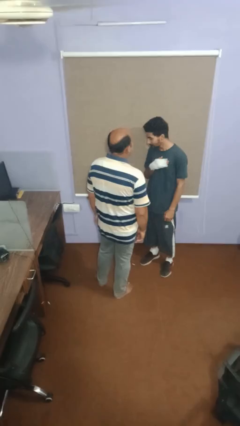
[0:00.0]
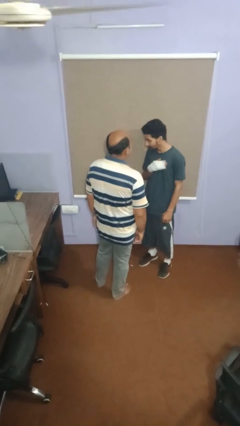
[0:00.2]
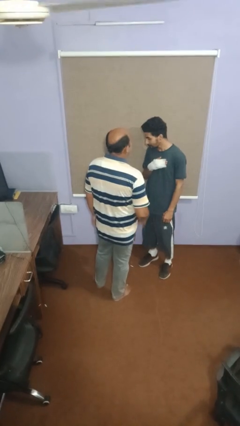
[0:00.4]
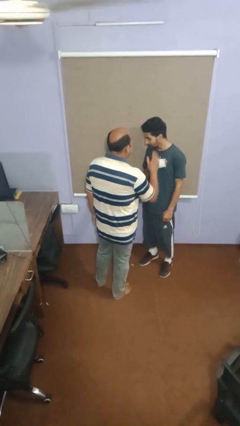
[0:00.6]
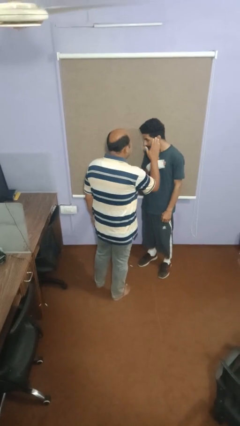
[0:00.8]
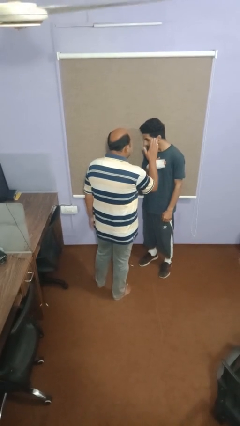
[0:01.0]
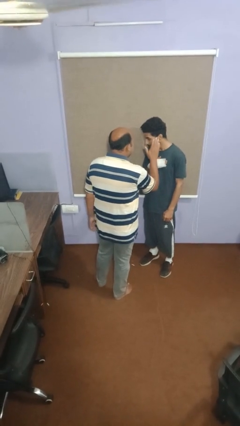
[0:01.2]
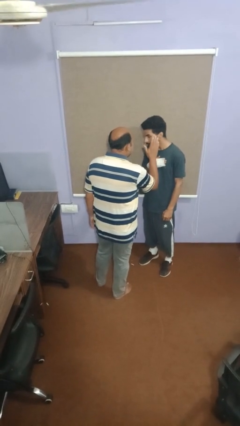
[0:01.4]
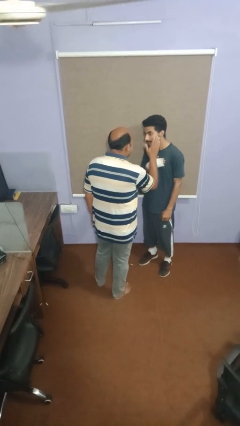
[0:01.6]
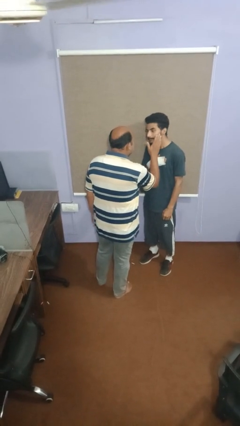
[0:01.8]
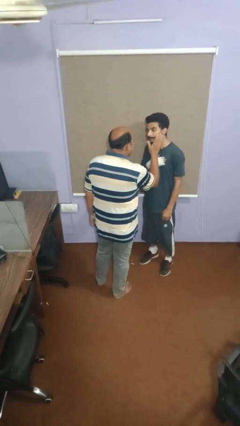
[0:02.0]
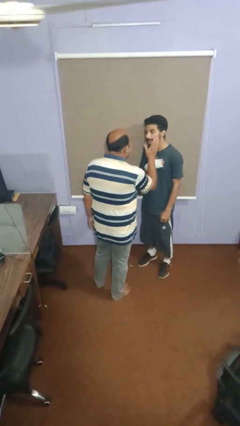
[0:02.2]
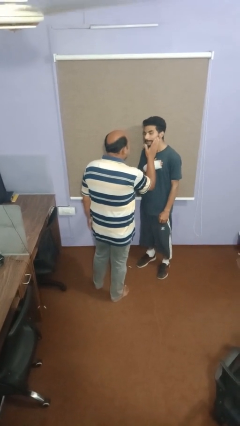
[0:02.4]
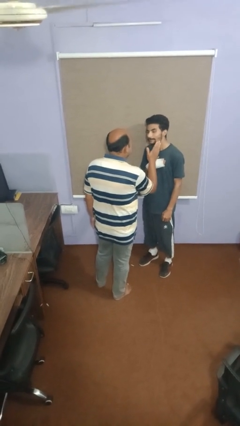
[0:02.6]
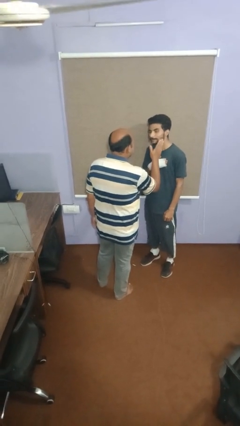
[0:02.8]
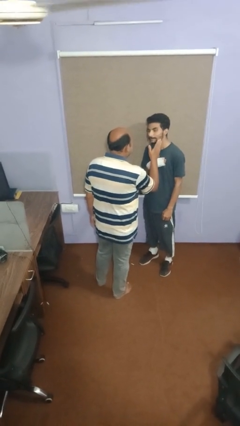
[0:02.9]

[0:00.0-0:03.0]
person touches face of person

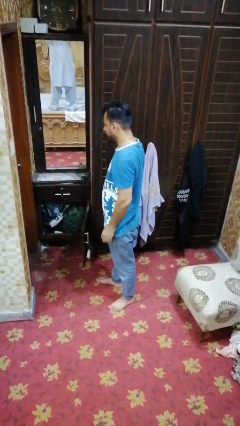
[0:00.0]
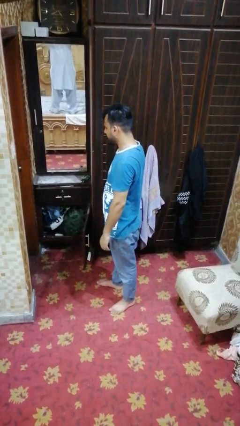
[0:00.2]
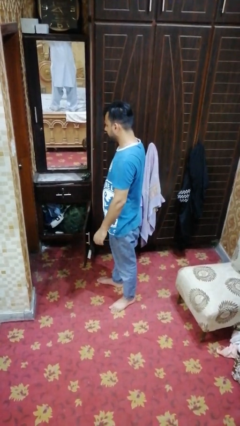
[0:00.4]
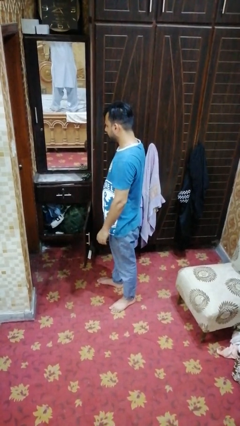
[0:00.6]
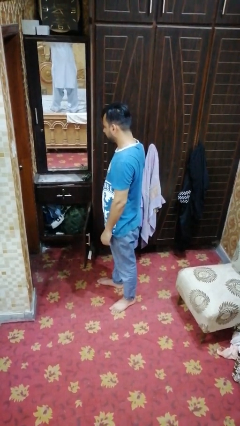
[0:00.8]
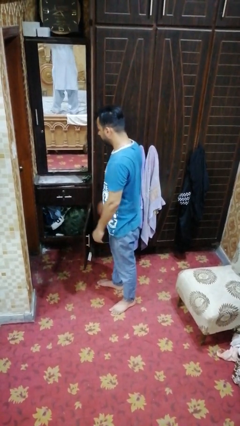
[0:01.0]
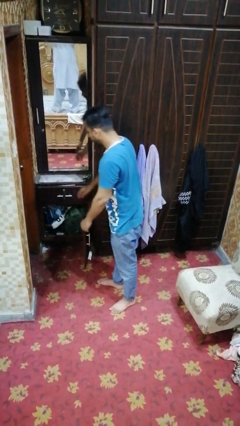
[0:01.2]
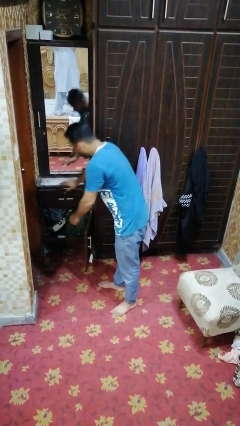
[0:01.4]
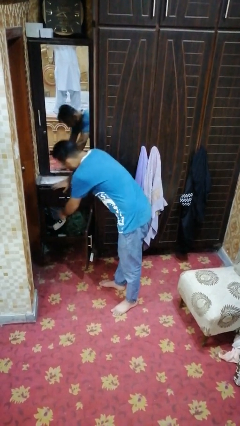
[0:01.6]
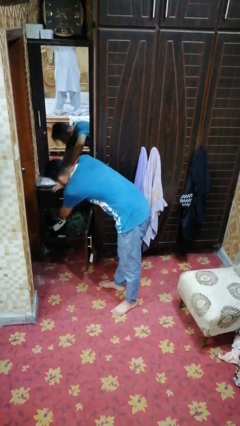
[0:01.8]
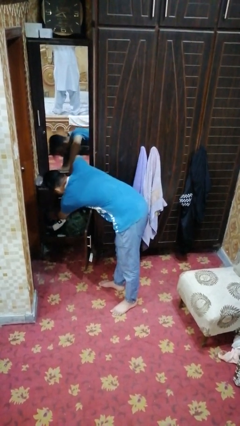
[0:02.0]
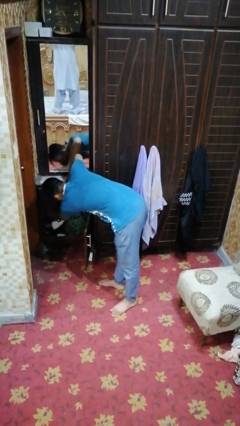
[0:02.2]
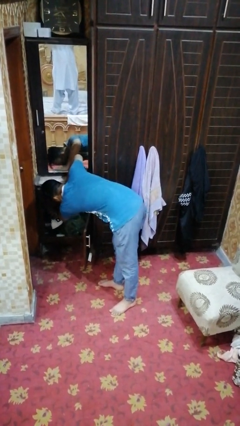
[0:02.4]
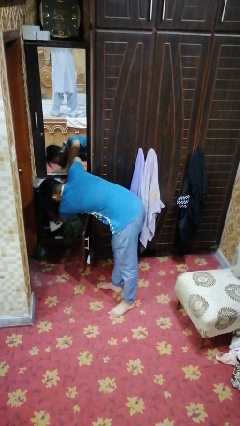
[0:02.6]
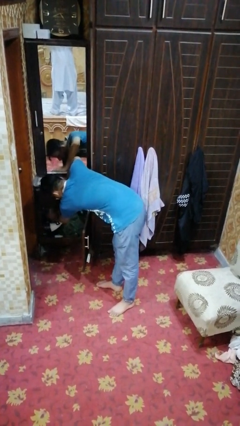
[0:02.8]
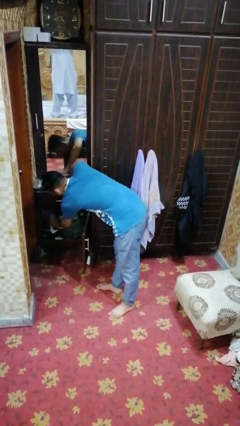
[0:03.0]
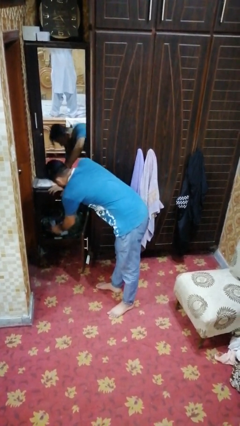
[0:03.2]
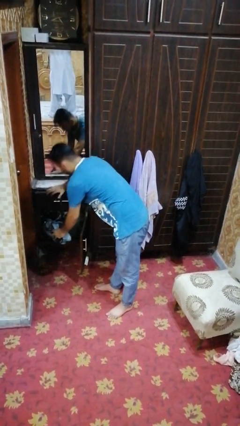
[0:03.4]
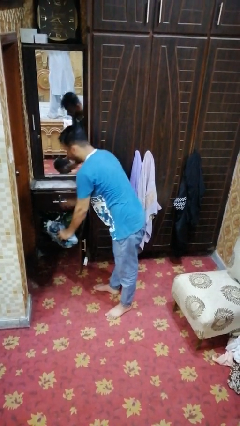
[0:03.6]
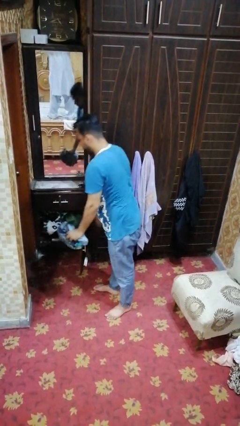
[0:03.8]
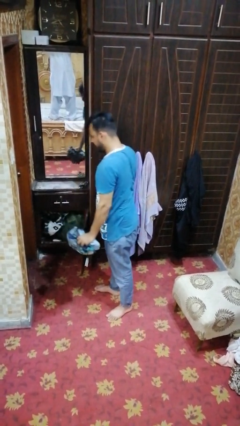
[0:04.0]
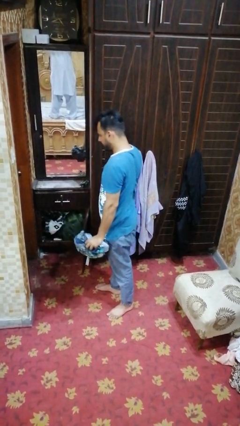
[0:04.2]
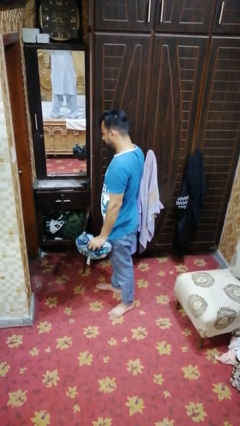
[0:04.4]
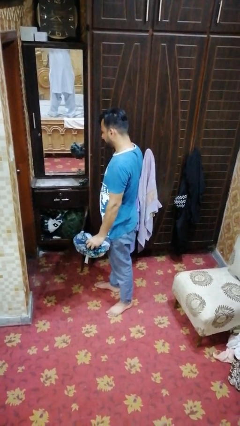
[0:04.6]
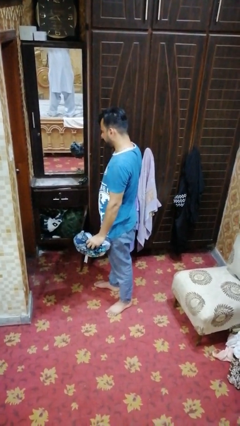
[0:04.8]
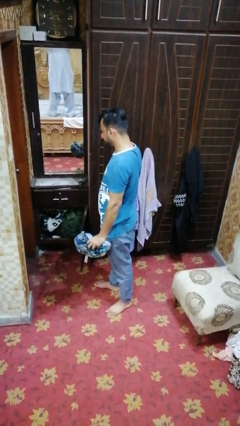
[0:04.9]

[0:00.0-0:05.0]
person takes clothes from dresser

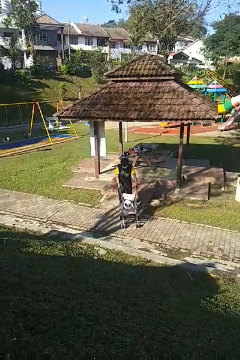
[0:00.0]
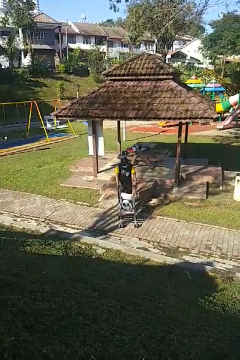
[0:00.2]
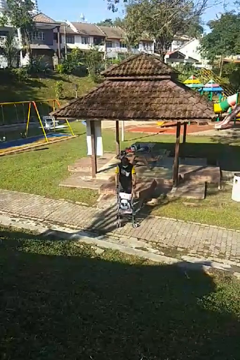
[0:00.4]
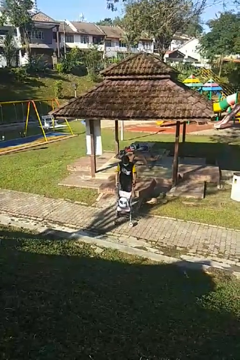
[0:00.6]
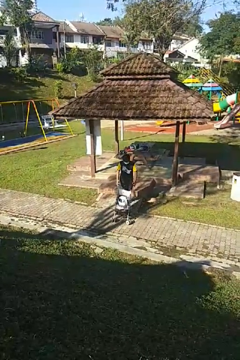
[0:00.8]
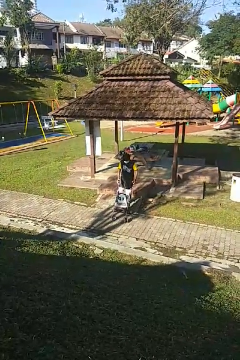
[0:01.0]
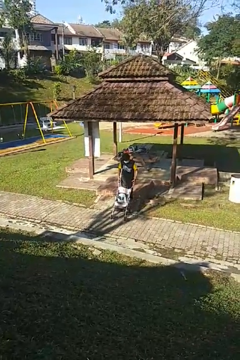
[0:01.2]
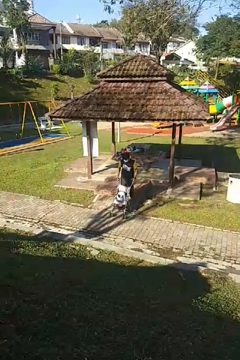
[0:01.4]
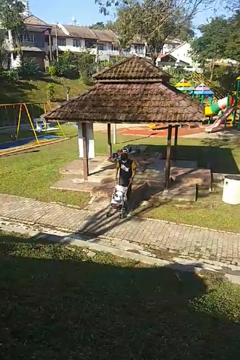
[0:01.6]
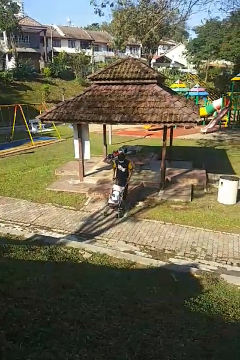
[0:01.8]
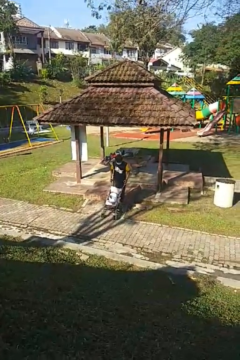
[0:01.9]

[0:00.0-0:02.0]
person pulls wheeled cart

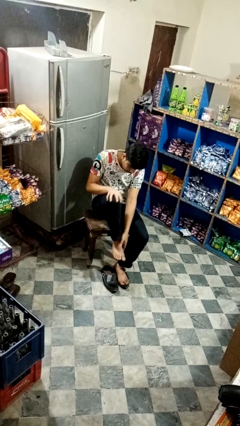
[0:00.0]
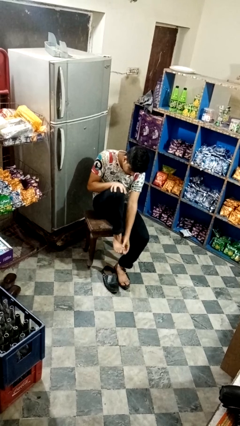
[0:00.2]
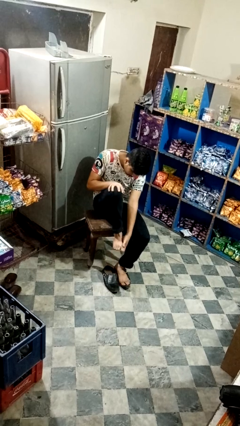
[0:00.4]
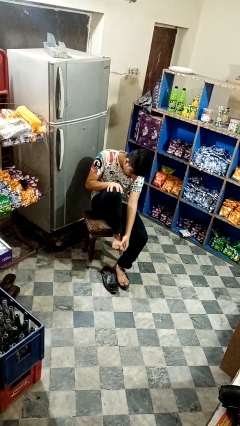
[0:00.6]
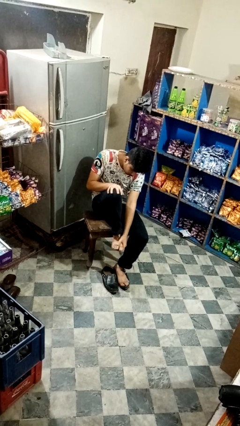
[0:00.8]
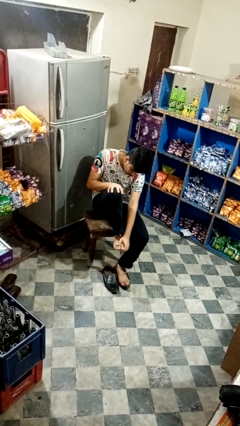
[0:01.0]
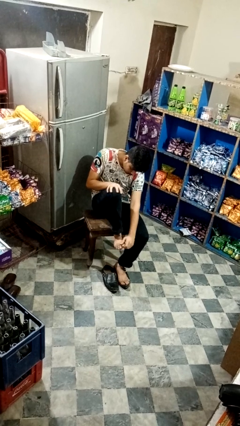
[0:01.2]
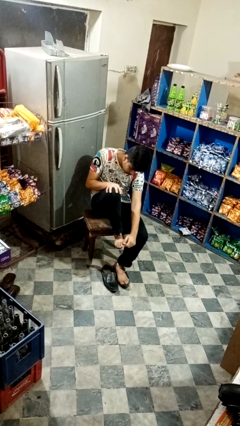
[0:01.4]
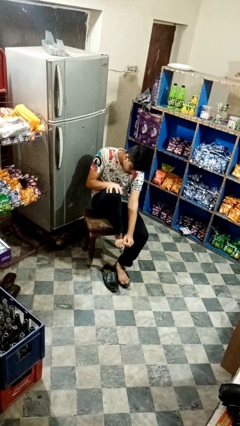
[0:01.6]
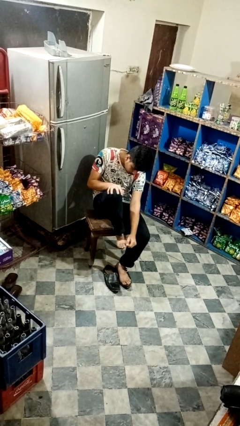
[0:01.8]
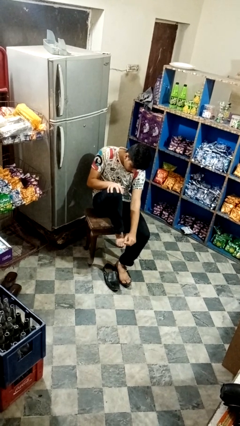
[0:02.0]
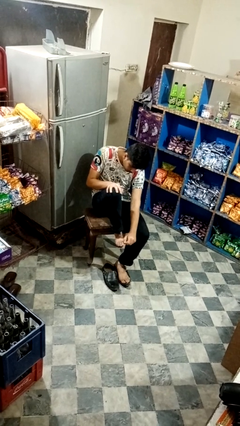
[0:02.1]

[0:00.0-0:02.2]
person rubs foot

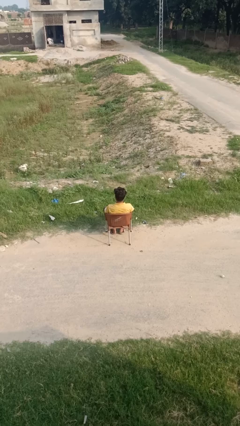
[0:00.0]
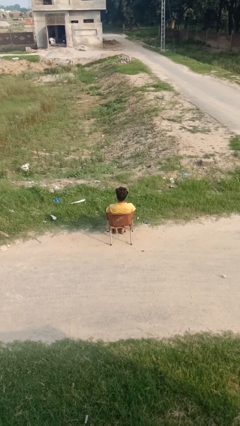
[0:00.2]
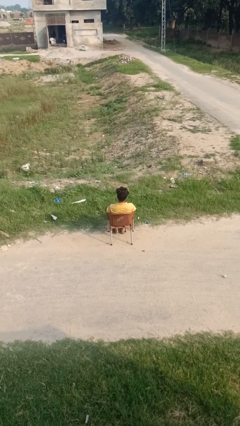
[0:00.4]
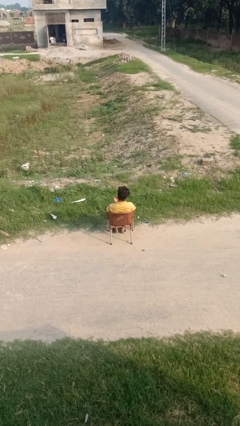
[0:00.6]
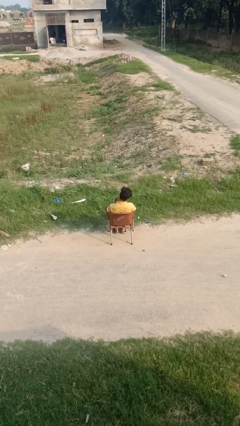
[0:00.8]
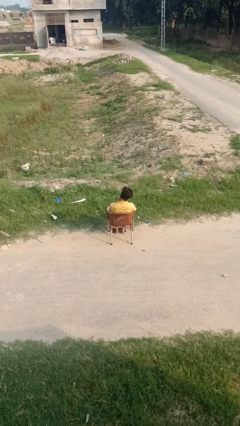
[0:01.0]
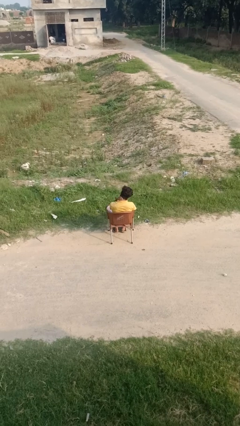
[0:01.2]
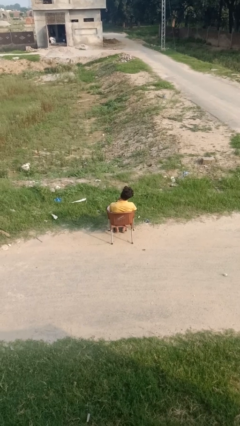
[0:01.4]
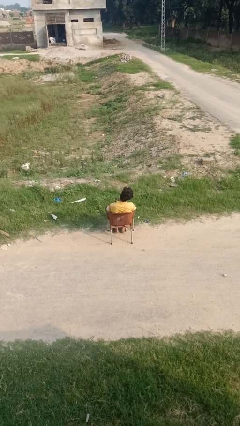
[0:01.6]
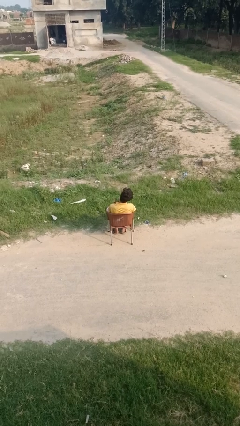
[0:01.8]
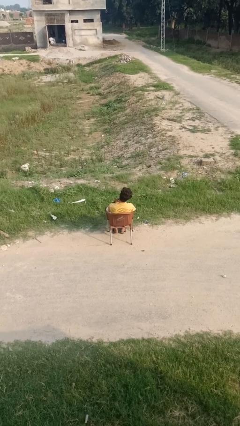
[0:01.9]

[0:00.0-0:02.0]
person rubs neck

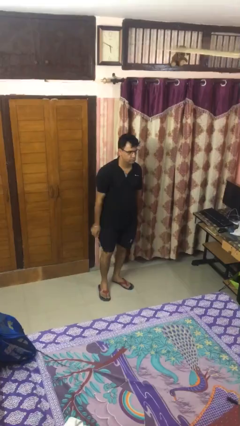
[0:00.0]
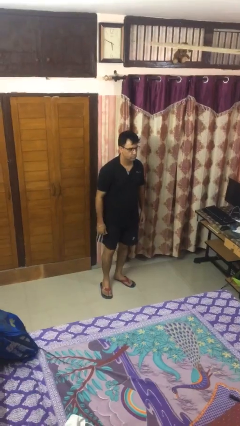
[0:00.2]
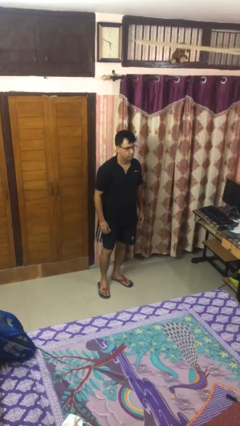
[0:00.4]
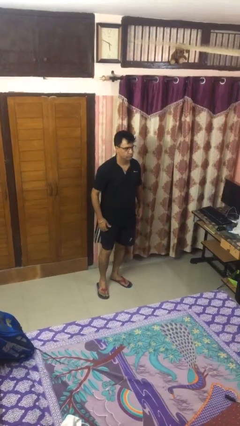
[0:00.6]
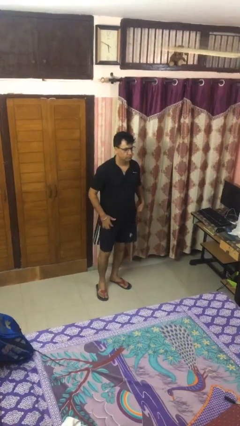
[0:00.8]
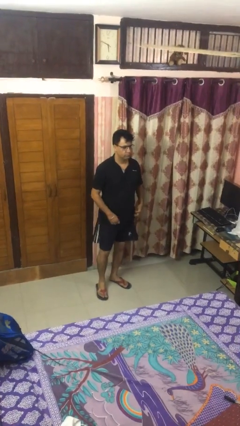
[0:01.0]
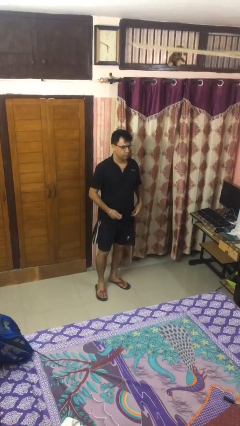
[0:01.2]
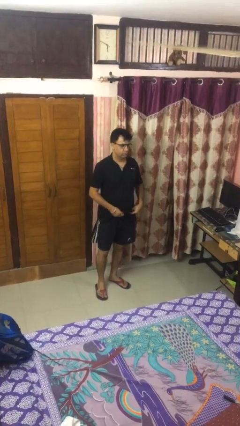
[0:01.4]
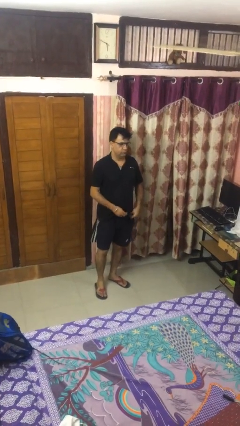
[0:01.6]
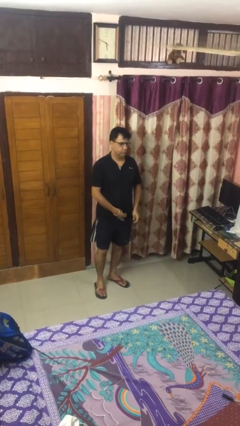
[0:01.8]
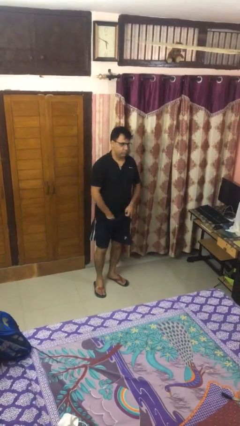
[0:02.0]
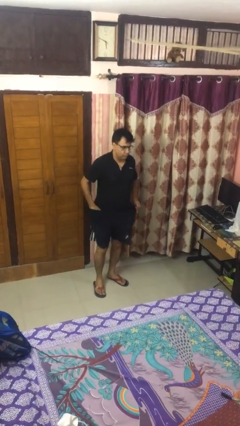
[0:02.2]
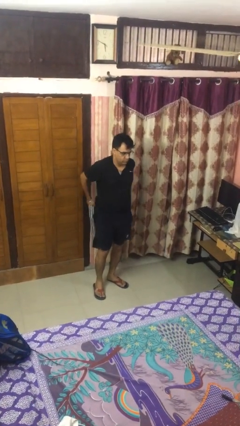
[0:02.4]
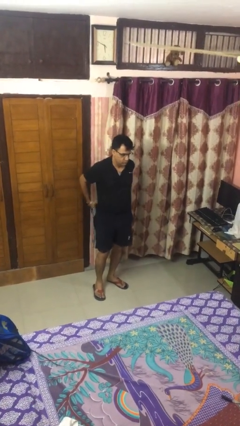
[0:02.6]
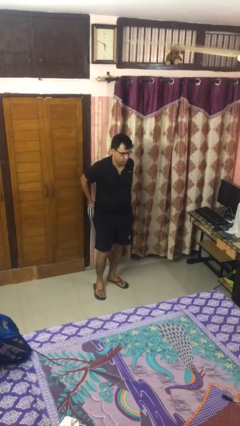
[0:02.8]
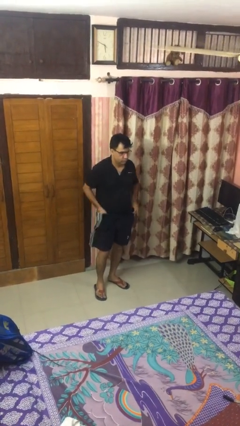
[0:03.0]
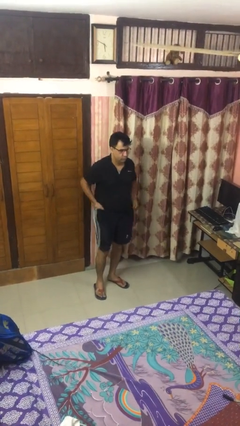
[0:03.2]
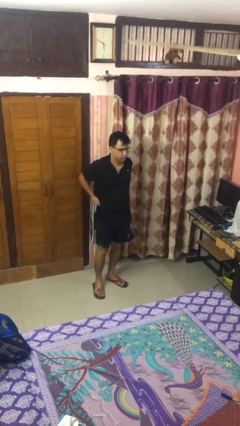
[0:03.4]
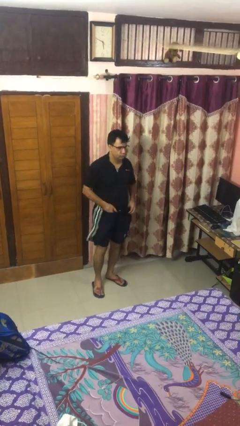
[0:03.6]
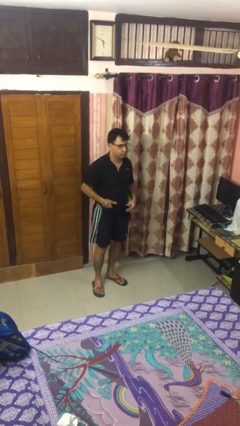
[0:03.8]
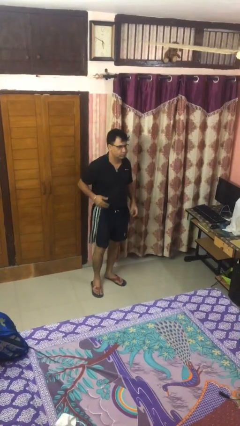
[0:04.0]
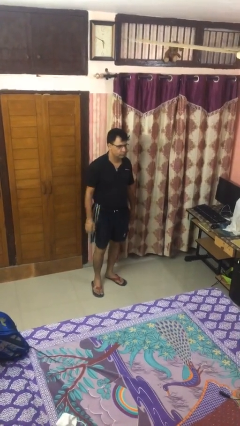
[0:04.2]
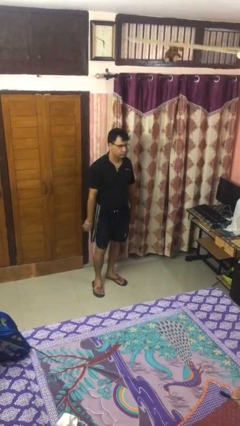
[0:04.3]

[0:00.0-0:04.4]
person tucks in shirt
